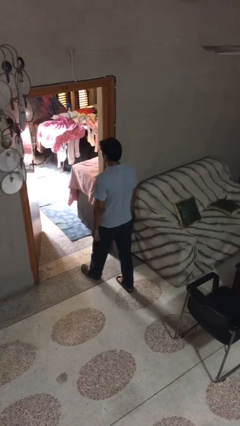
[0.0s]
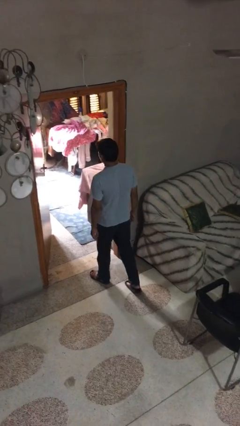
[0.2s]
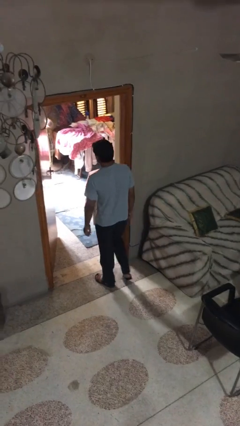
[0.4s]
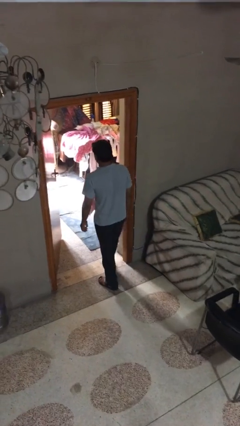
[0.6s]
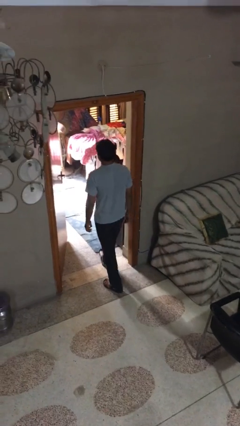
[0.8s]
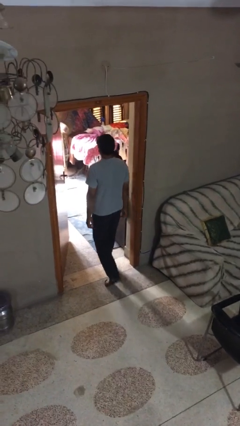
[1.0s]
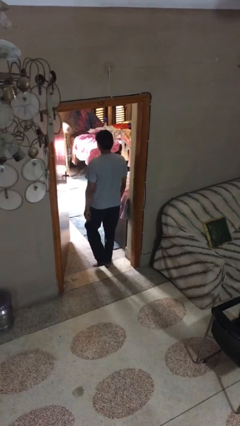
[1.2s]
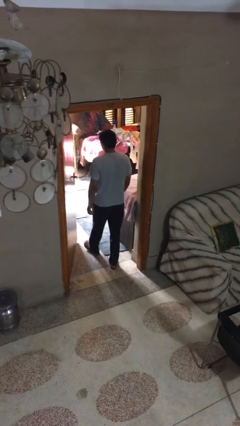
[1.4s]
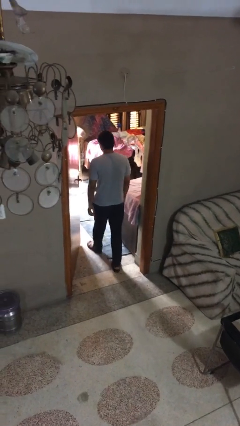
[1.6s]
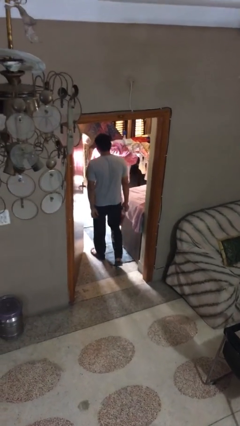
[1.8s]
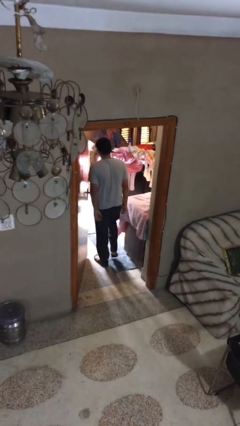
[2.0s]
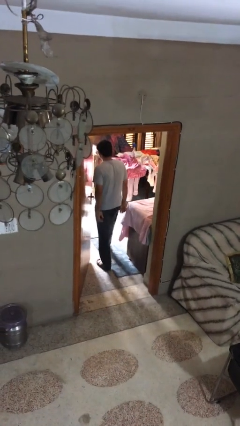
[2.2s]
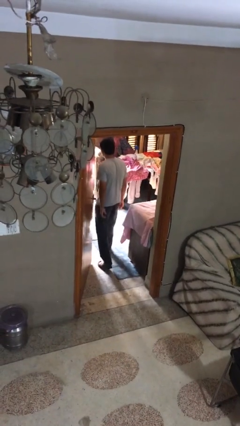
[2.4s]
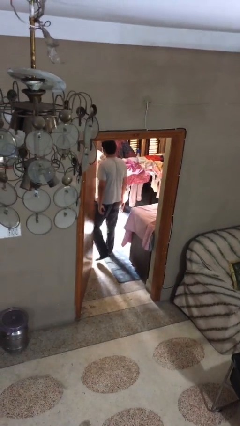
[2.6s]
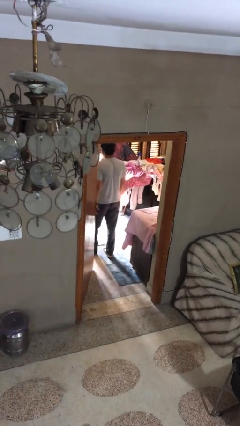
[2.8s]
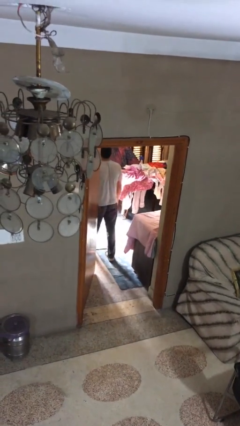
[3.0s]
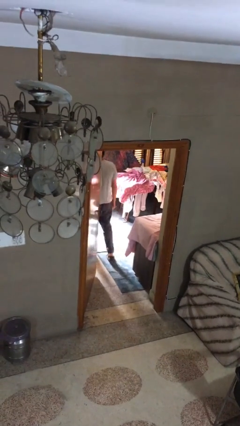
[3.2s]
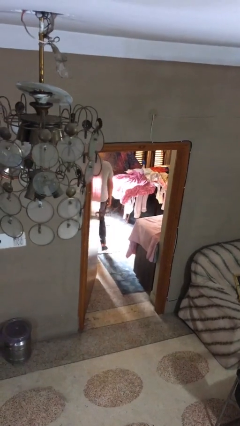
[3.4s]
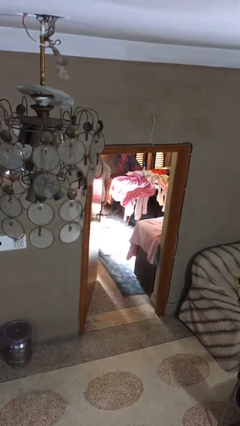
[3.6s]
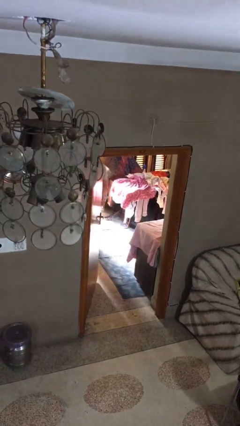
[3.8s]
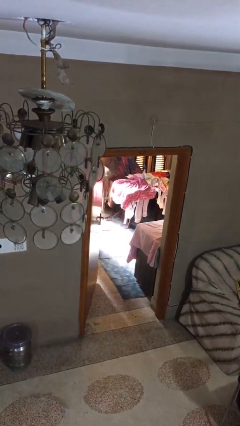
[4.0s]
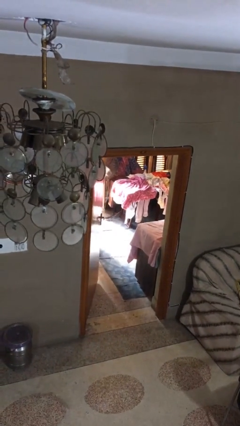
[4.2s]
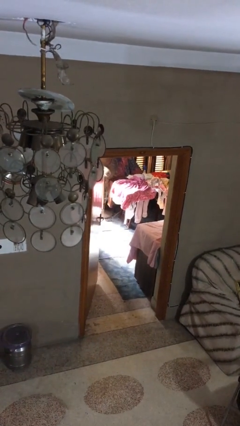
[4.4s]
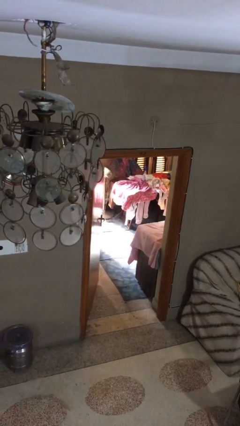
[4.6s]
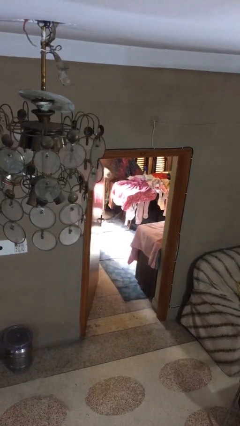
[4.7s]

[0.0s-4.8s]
person exits scene through structure

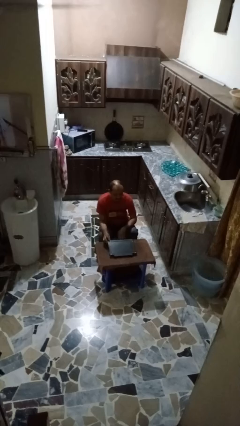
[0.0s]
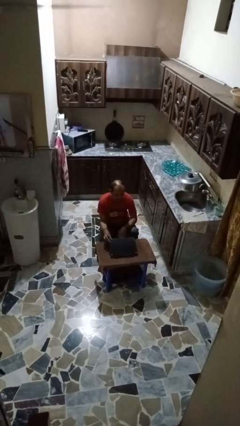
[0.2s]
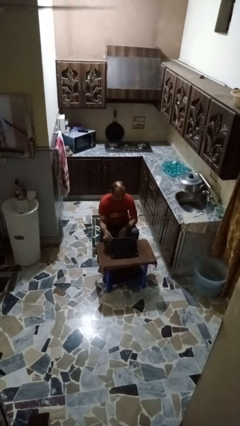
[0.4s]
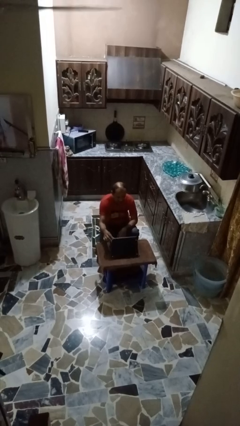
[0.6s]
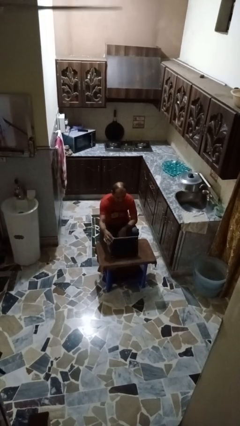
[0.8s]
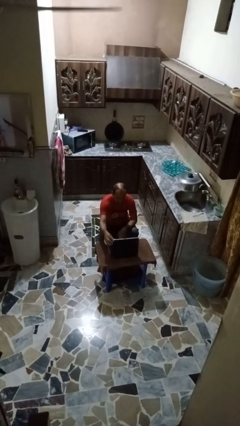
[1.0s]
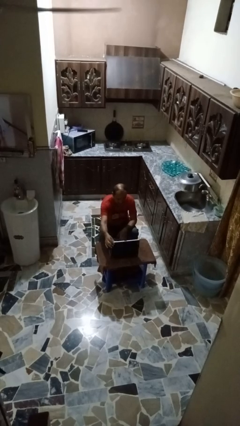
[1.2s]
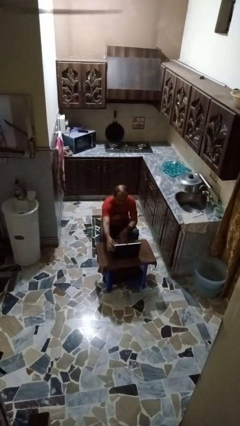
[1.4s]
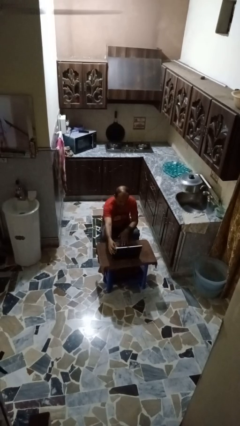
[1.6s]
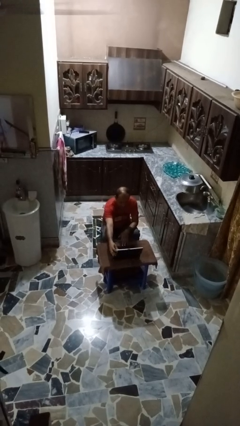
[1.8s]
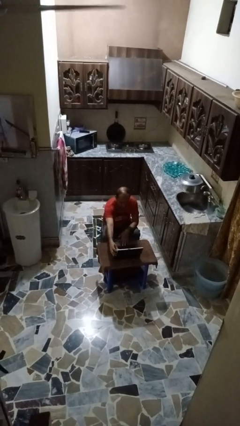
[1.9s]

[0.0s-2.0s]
person opens laptop

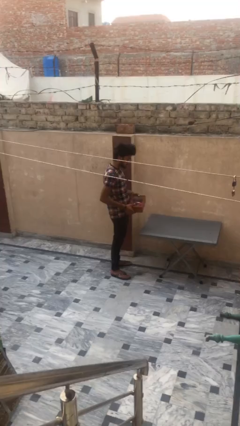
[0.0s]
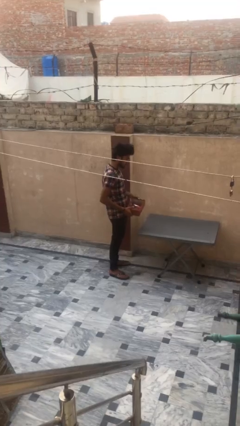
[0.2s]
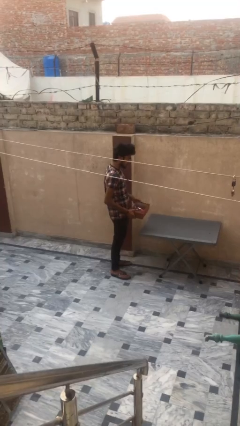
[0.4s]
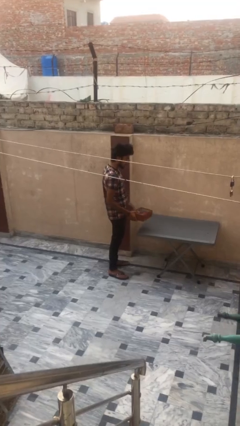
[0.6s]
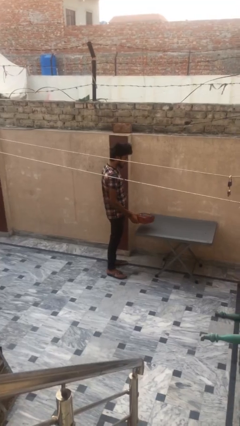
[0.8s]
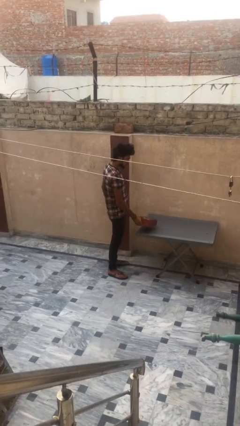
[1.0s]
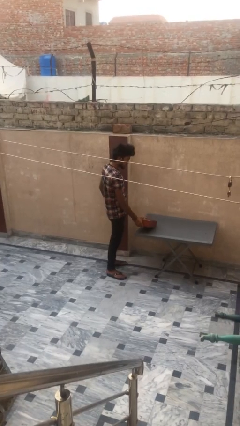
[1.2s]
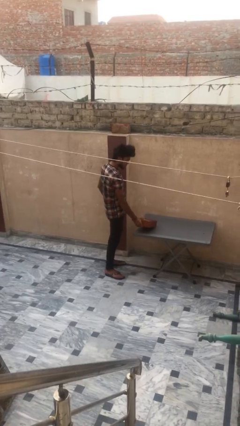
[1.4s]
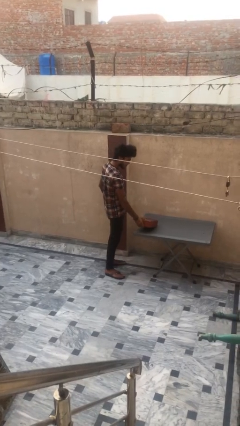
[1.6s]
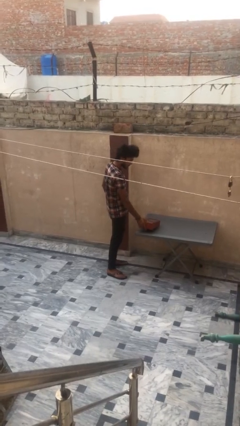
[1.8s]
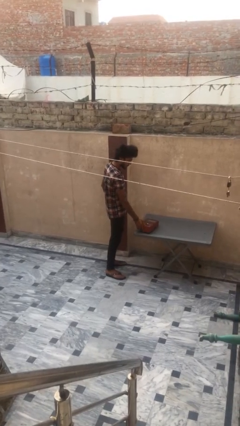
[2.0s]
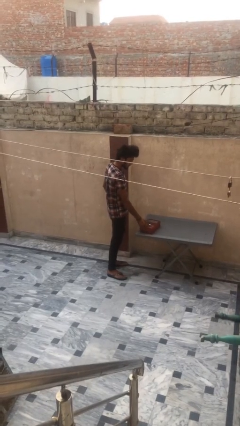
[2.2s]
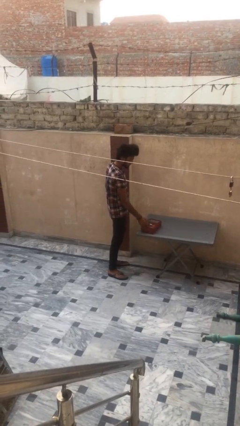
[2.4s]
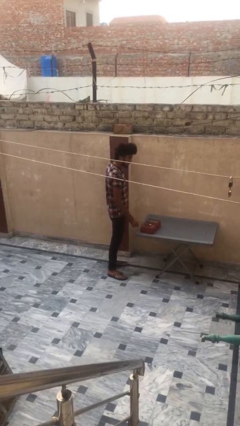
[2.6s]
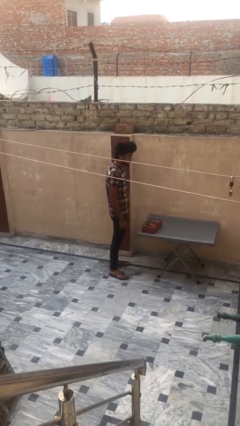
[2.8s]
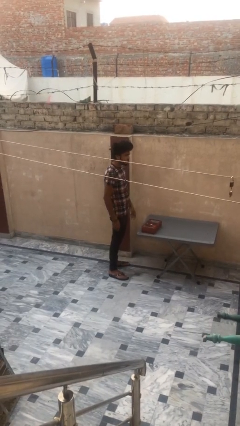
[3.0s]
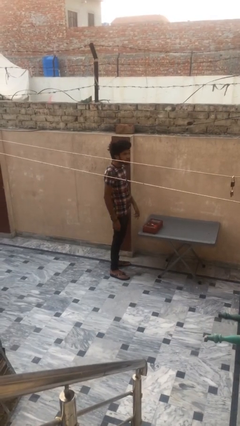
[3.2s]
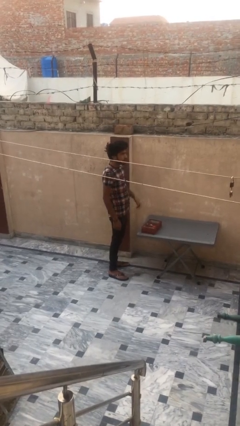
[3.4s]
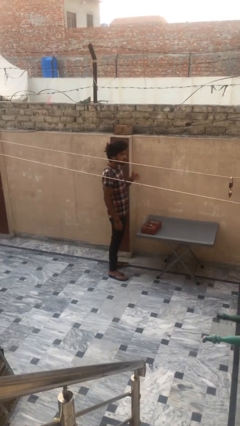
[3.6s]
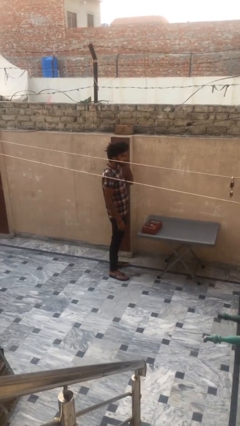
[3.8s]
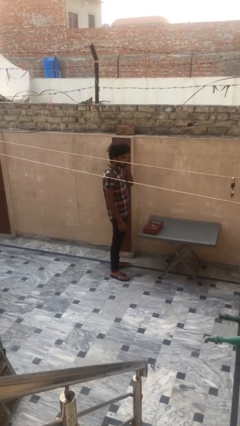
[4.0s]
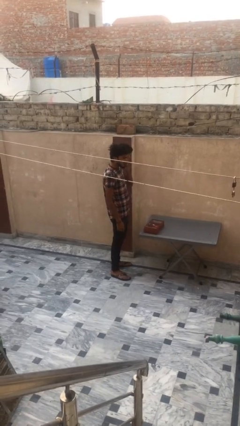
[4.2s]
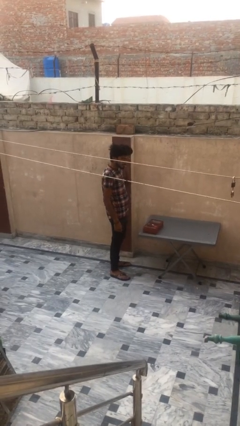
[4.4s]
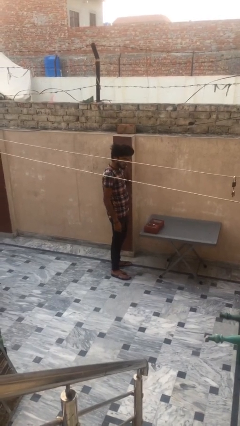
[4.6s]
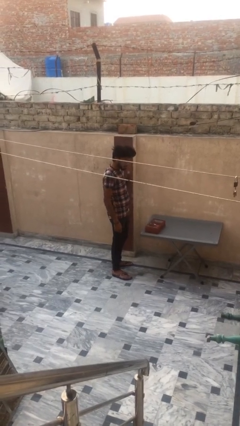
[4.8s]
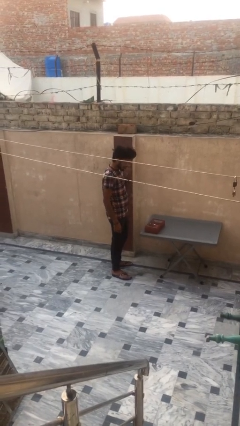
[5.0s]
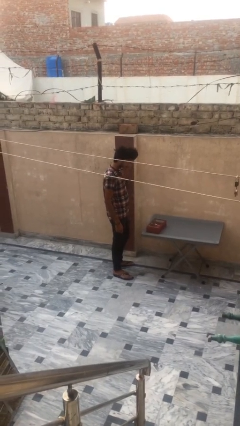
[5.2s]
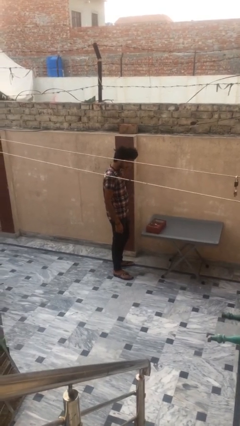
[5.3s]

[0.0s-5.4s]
person puts down object on table

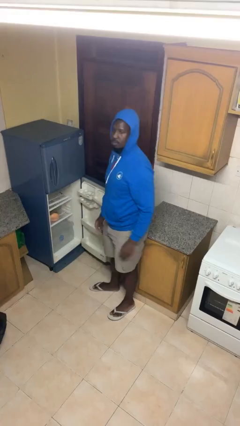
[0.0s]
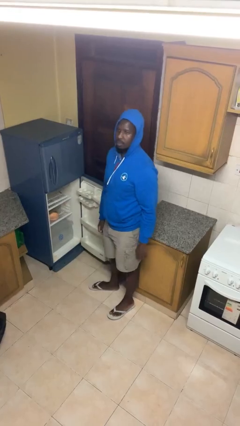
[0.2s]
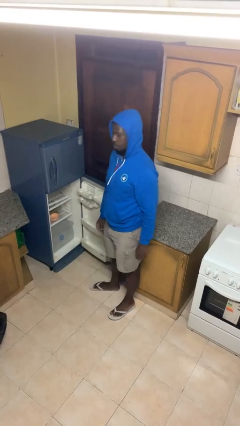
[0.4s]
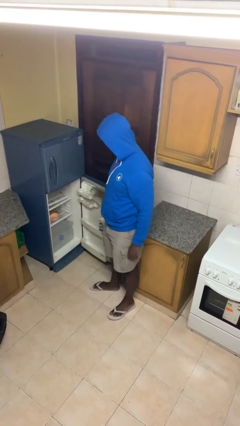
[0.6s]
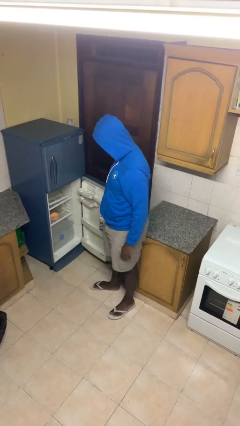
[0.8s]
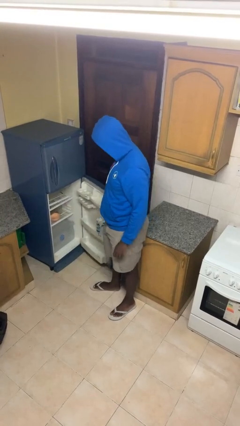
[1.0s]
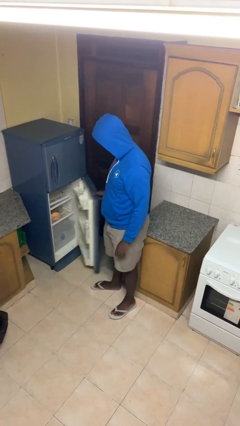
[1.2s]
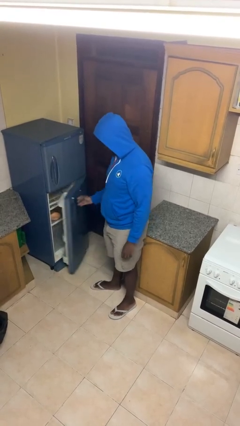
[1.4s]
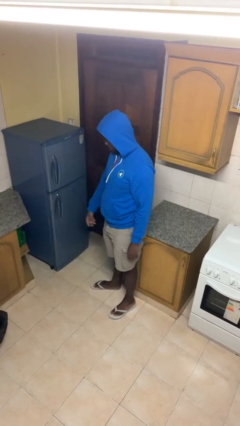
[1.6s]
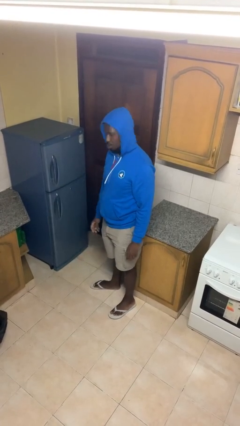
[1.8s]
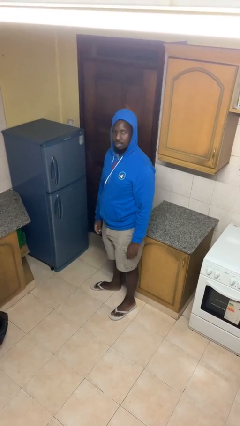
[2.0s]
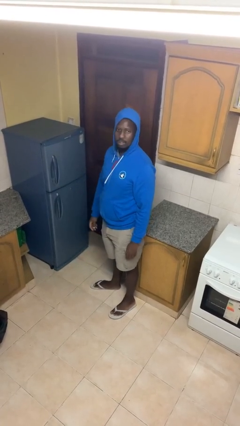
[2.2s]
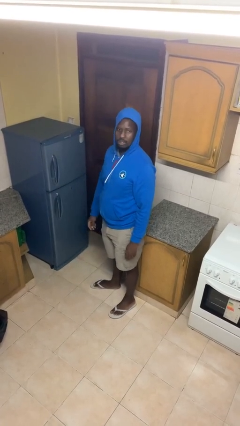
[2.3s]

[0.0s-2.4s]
person closes refrigerator

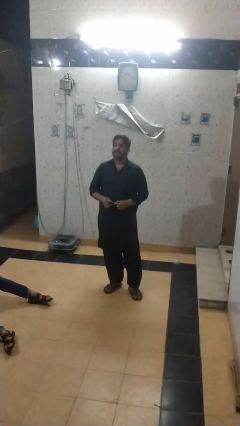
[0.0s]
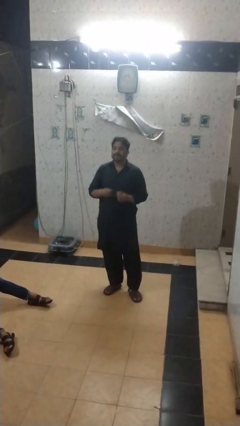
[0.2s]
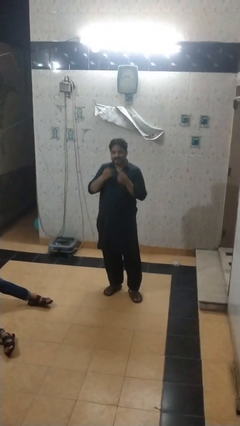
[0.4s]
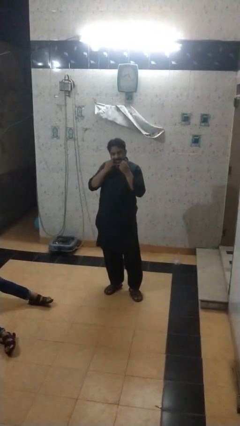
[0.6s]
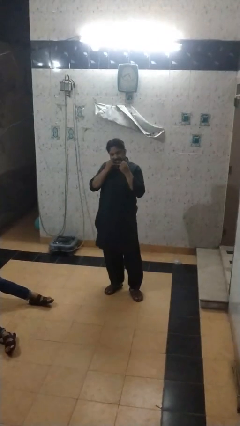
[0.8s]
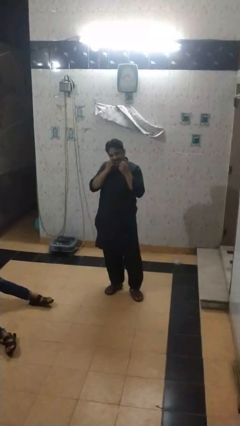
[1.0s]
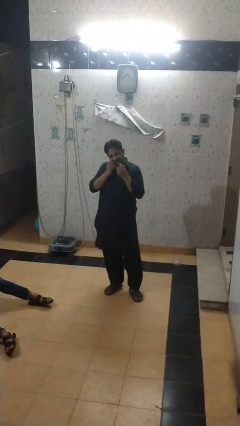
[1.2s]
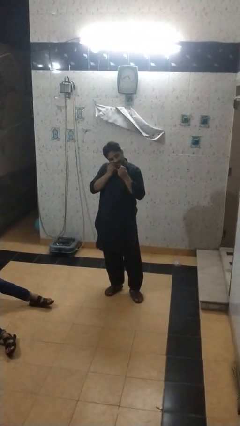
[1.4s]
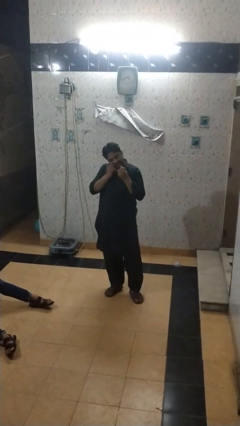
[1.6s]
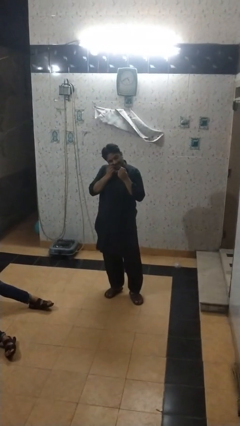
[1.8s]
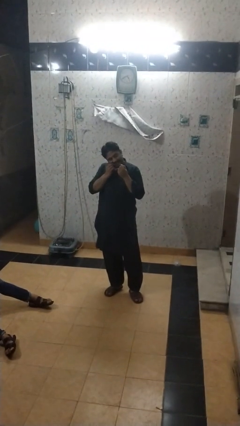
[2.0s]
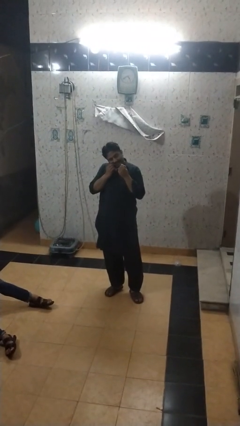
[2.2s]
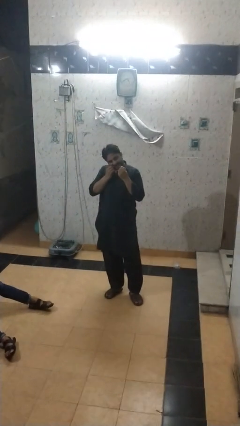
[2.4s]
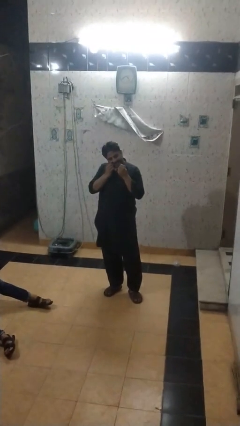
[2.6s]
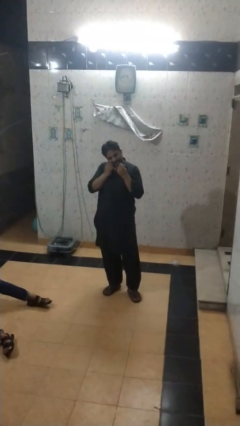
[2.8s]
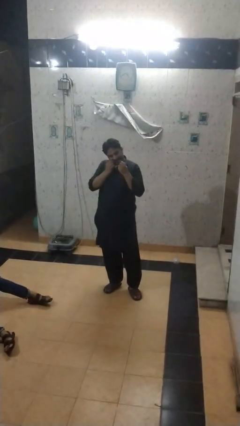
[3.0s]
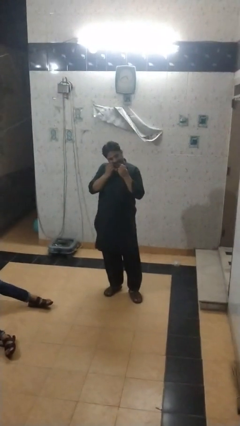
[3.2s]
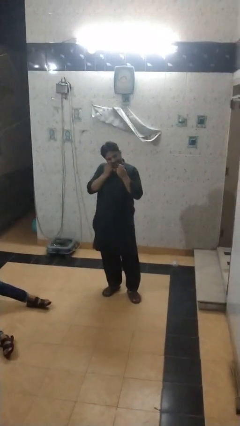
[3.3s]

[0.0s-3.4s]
person flosses
